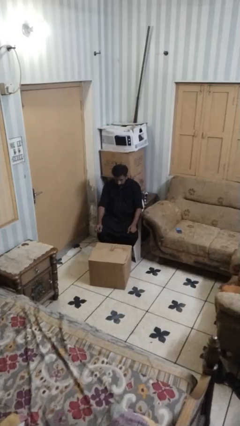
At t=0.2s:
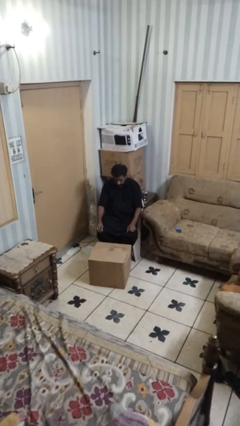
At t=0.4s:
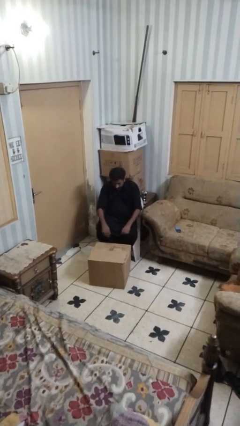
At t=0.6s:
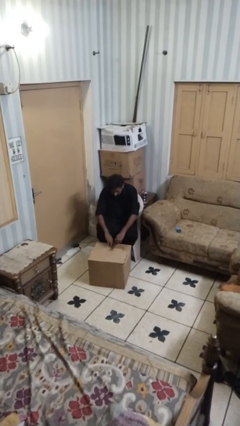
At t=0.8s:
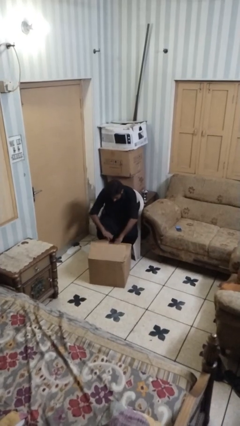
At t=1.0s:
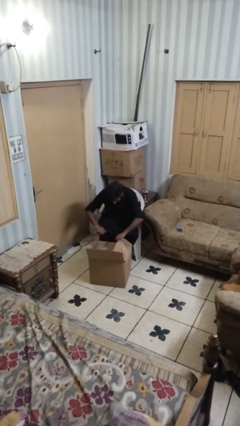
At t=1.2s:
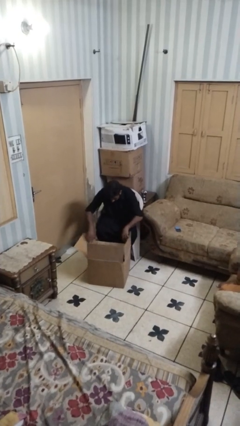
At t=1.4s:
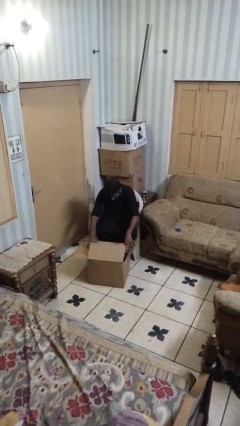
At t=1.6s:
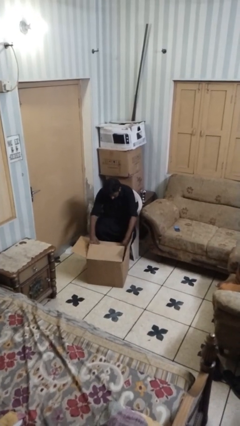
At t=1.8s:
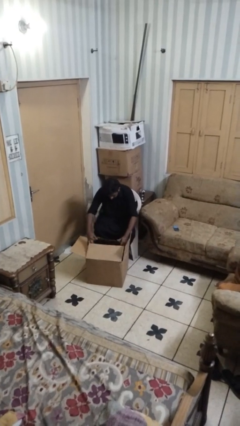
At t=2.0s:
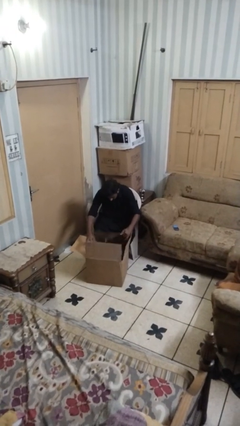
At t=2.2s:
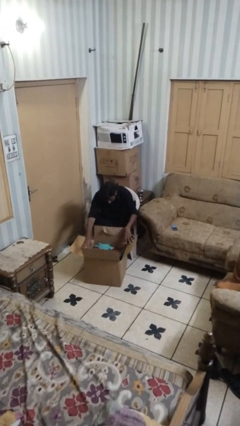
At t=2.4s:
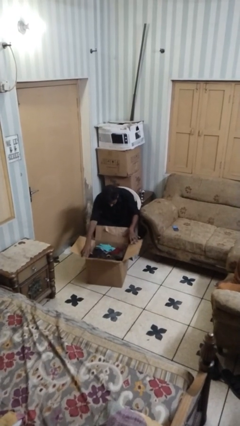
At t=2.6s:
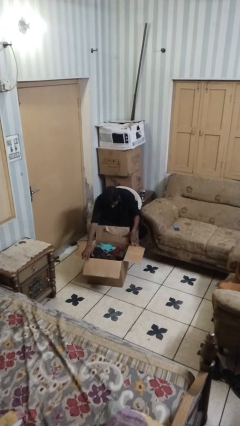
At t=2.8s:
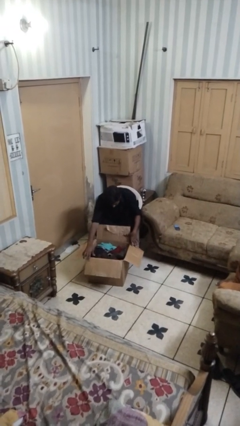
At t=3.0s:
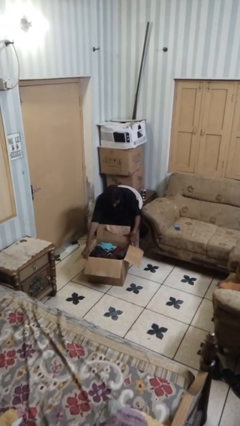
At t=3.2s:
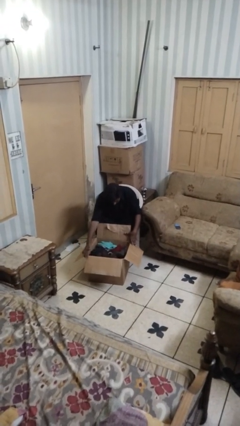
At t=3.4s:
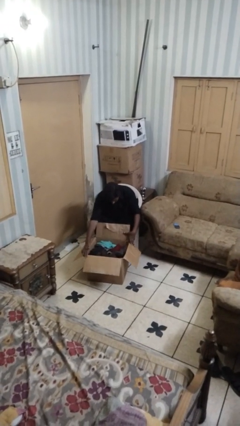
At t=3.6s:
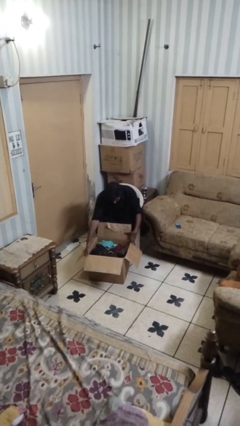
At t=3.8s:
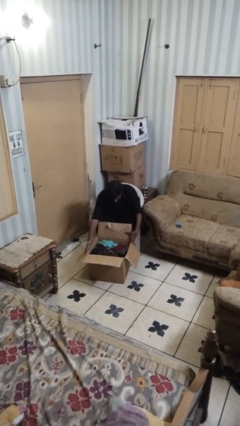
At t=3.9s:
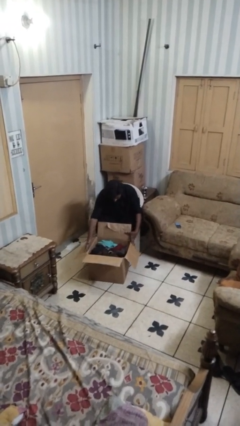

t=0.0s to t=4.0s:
person opens box

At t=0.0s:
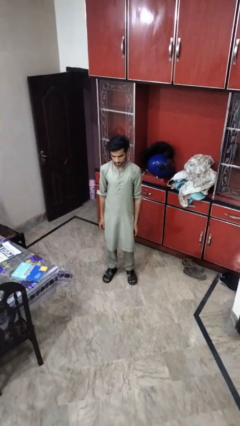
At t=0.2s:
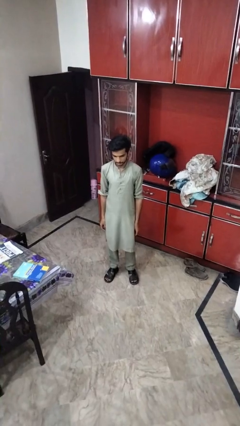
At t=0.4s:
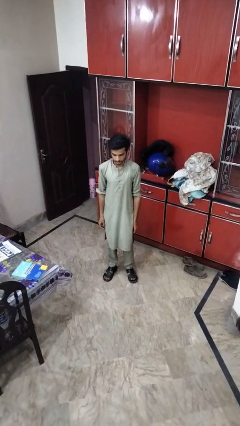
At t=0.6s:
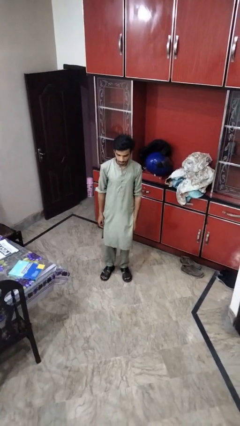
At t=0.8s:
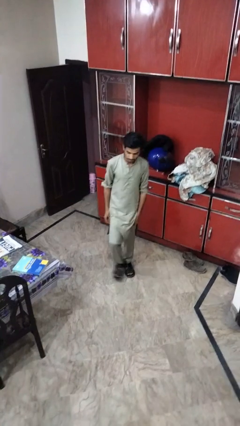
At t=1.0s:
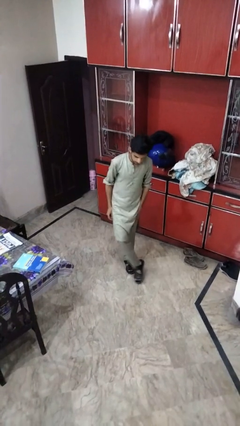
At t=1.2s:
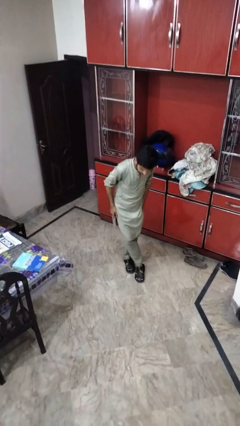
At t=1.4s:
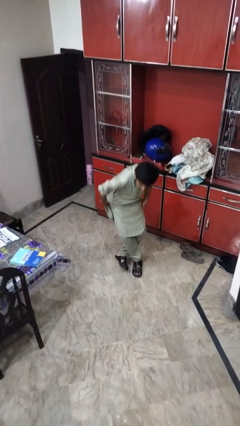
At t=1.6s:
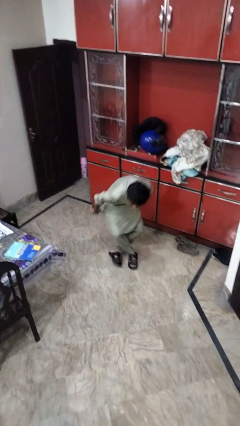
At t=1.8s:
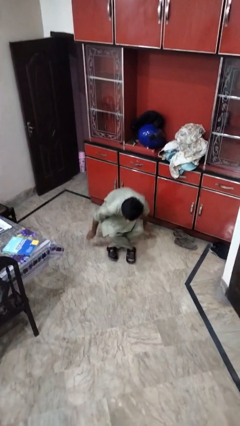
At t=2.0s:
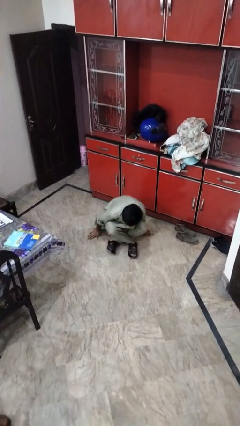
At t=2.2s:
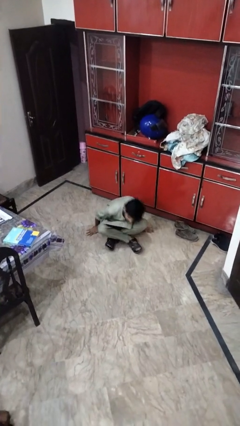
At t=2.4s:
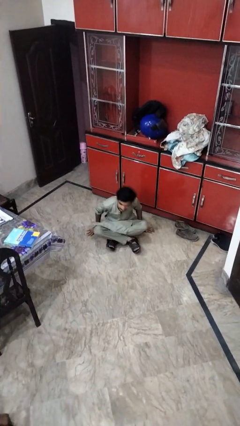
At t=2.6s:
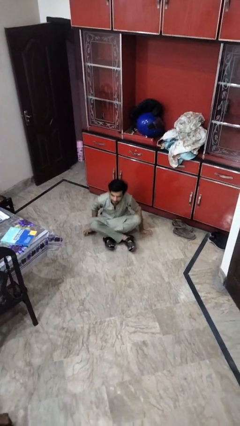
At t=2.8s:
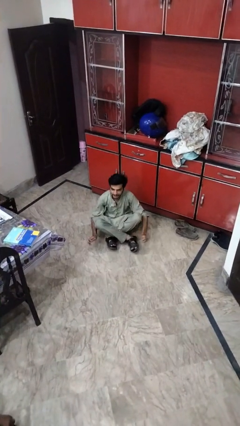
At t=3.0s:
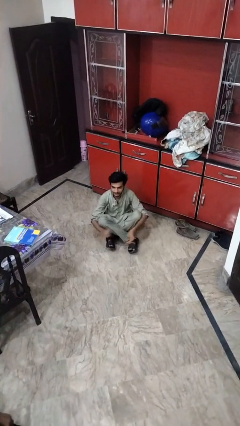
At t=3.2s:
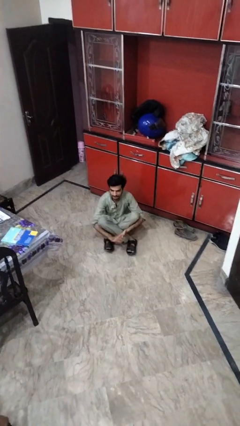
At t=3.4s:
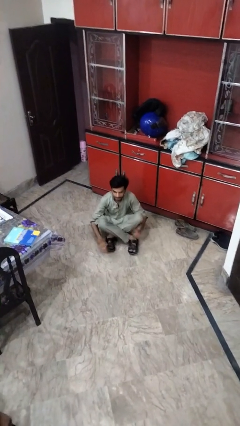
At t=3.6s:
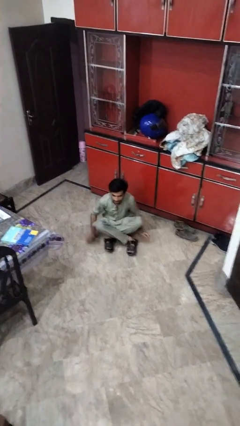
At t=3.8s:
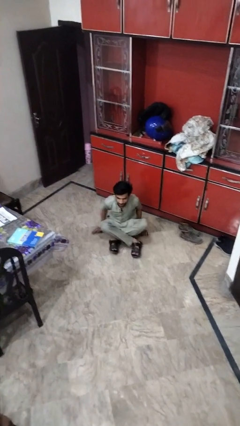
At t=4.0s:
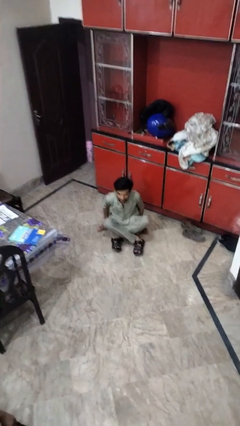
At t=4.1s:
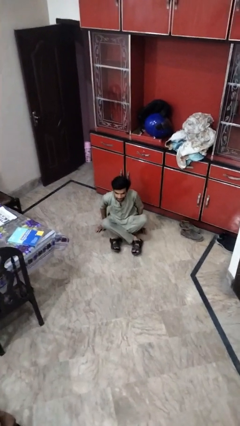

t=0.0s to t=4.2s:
person sits crisscross

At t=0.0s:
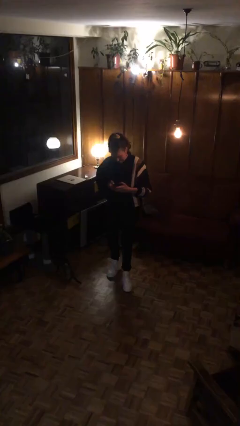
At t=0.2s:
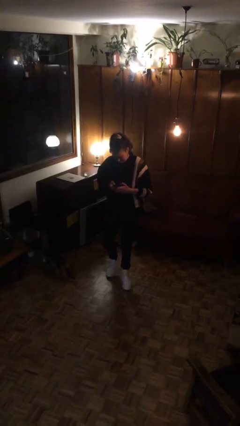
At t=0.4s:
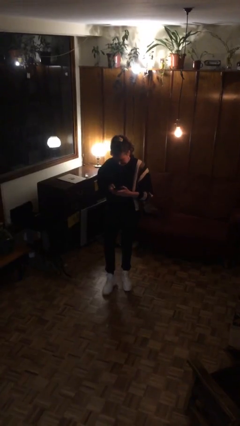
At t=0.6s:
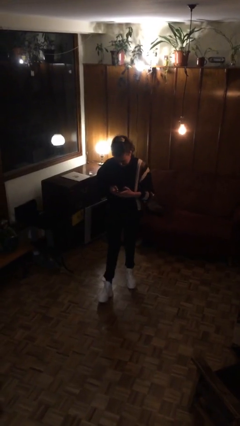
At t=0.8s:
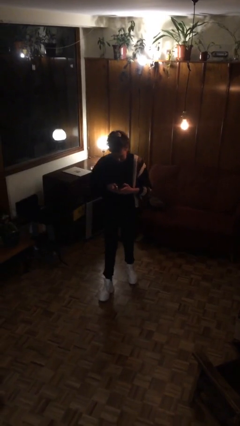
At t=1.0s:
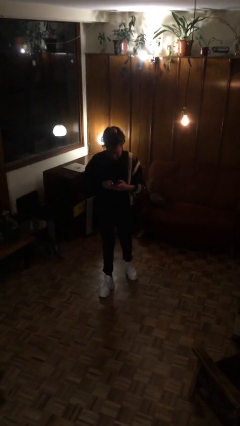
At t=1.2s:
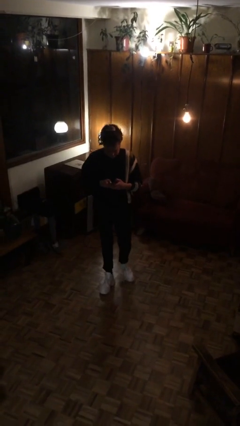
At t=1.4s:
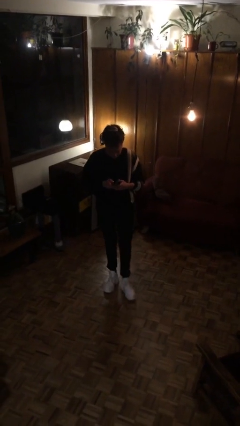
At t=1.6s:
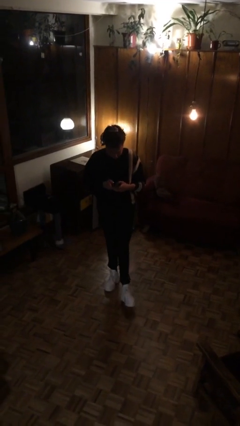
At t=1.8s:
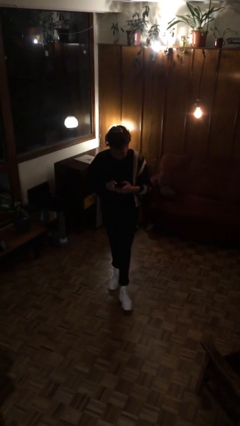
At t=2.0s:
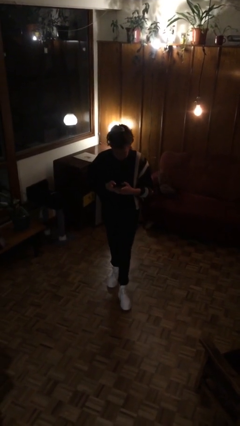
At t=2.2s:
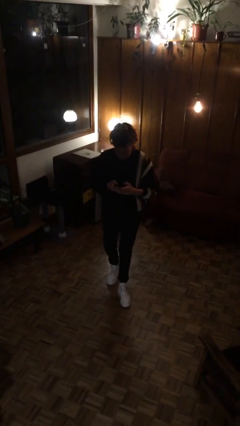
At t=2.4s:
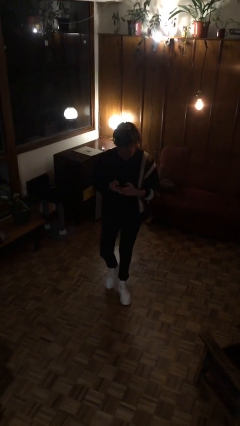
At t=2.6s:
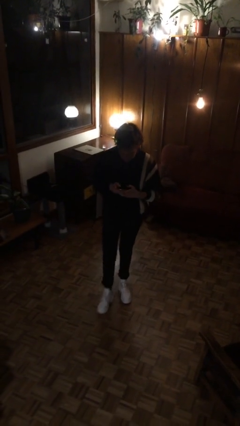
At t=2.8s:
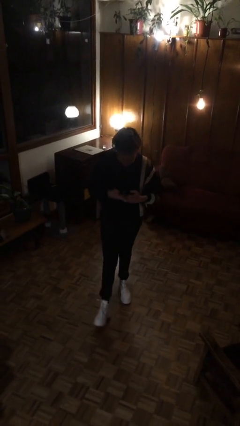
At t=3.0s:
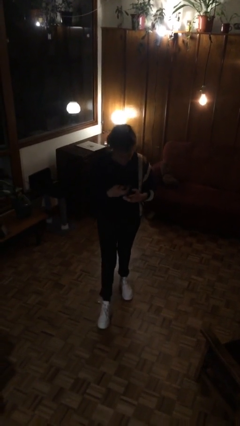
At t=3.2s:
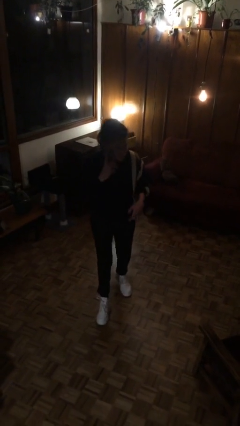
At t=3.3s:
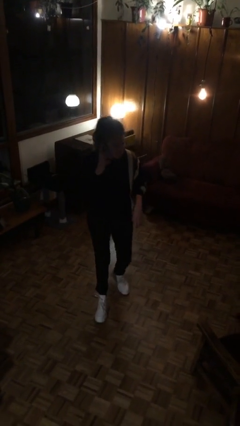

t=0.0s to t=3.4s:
person texts on phone

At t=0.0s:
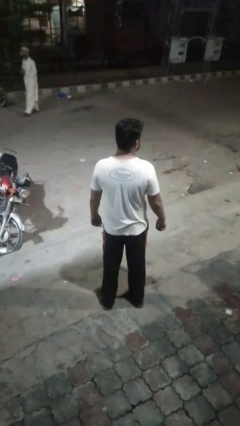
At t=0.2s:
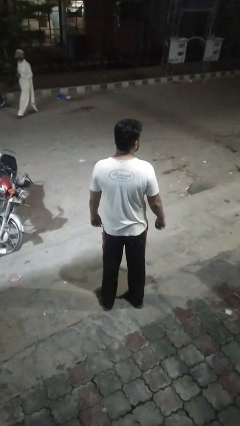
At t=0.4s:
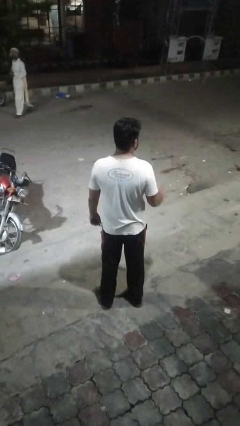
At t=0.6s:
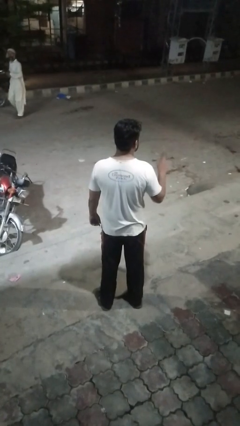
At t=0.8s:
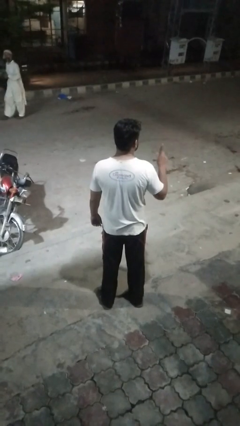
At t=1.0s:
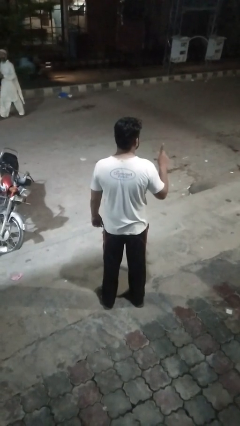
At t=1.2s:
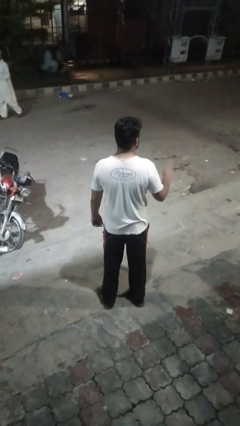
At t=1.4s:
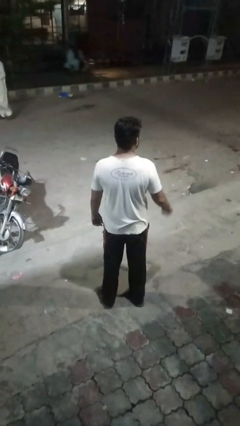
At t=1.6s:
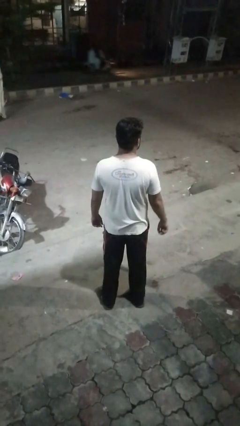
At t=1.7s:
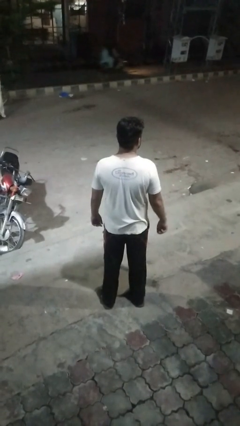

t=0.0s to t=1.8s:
person gestures number one

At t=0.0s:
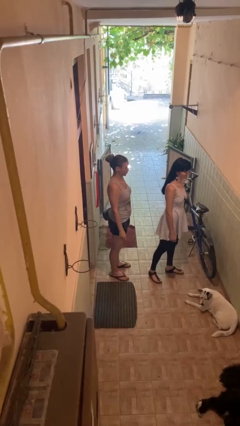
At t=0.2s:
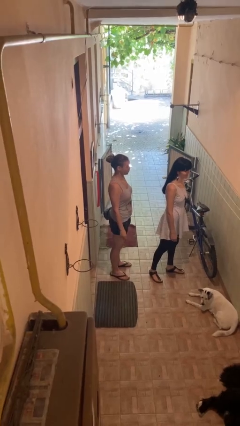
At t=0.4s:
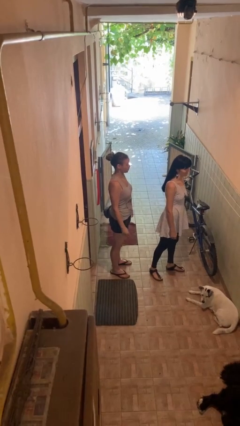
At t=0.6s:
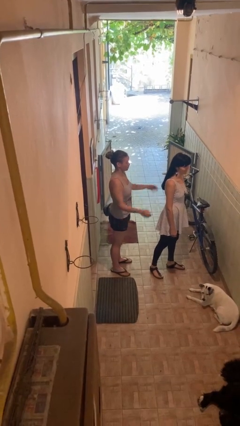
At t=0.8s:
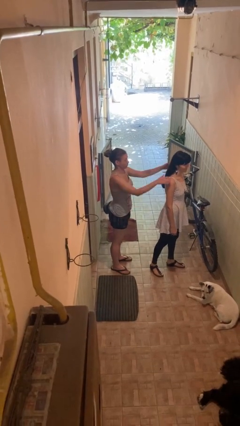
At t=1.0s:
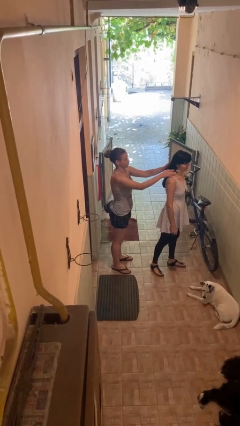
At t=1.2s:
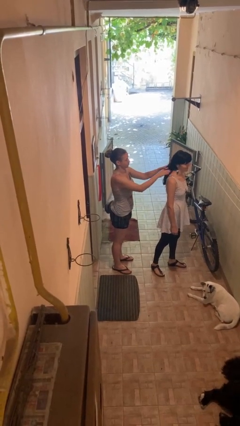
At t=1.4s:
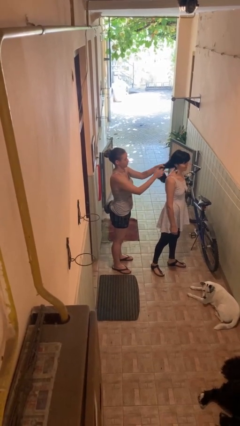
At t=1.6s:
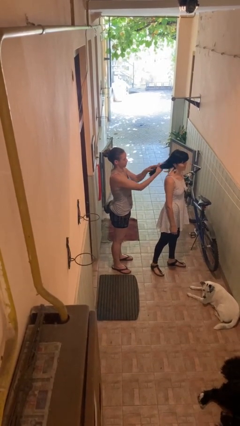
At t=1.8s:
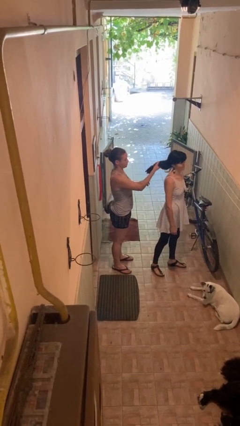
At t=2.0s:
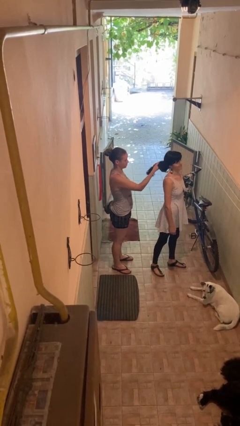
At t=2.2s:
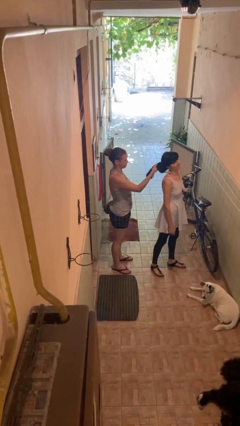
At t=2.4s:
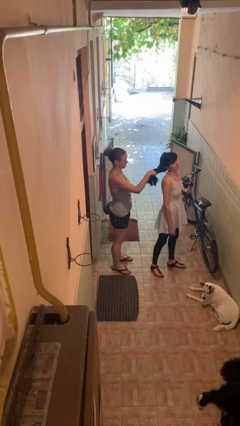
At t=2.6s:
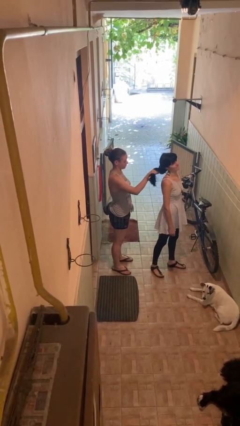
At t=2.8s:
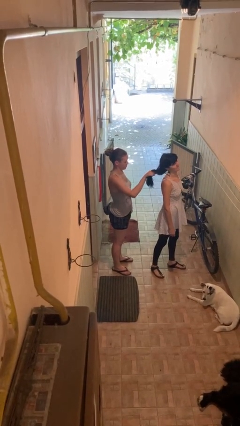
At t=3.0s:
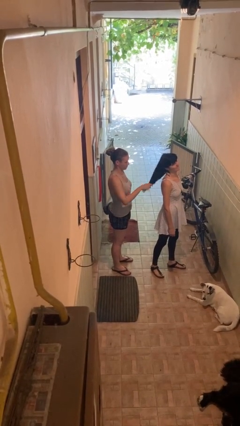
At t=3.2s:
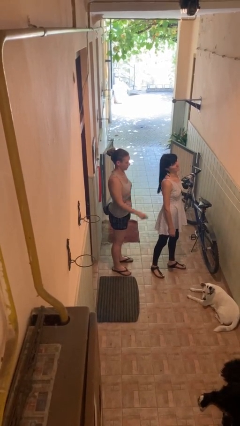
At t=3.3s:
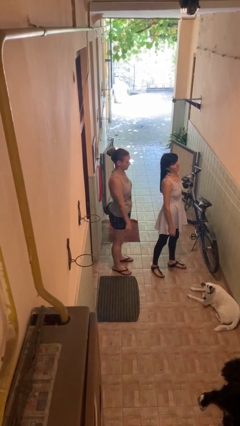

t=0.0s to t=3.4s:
person grabs person by hair

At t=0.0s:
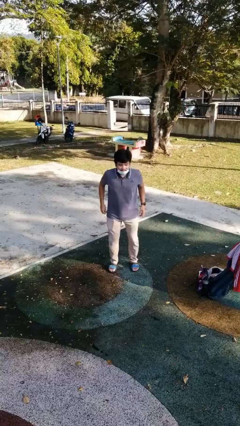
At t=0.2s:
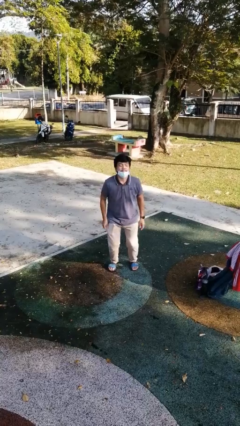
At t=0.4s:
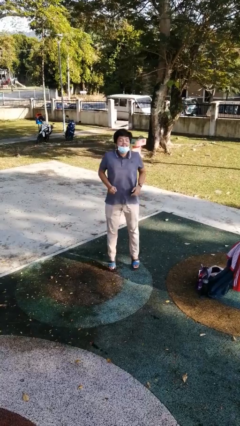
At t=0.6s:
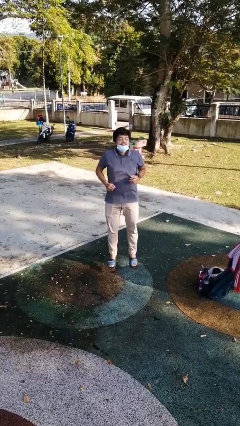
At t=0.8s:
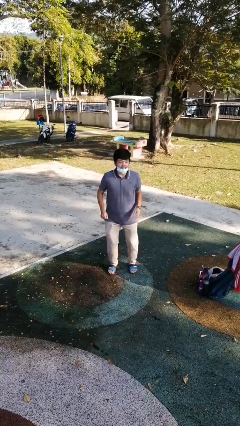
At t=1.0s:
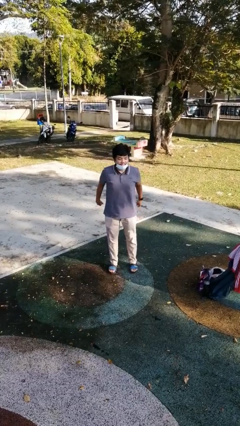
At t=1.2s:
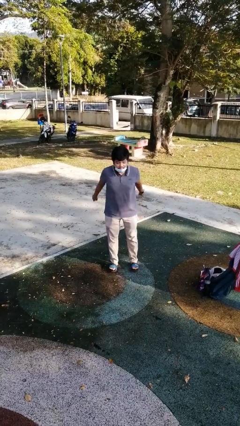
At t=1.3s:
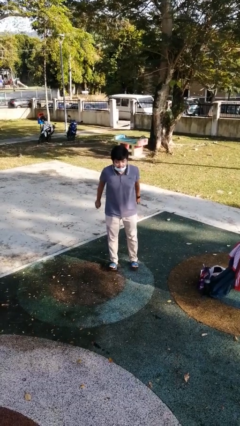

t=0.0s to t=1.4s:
person jumps
